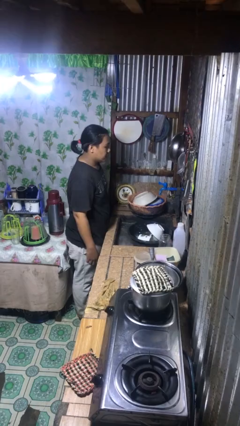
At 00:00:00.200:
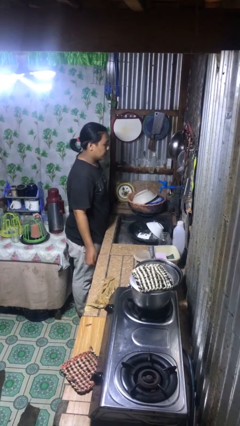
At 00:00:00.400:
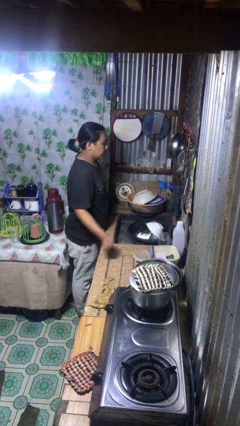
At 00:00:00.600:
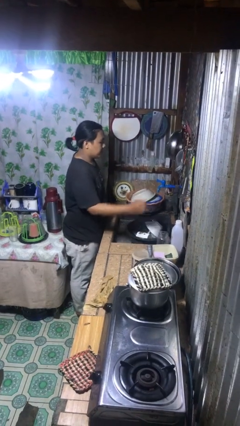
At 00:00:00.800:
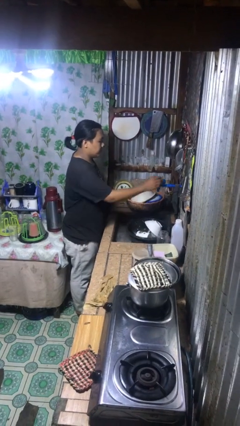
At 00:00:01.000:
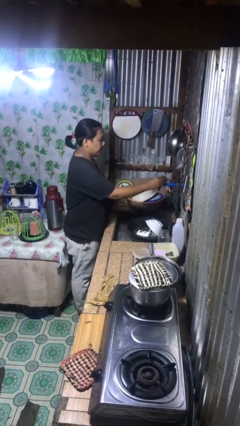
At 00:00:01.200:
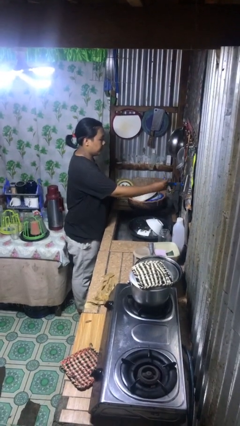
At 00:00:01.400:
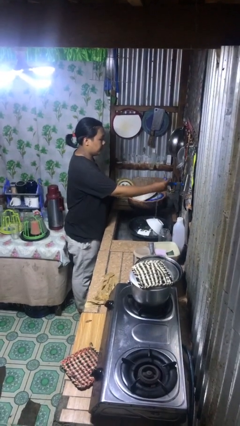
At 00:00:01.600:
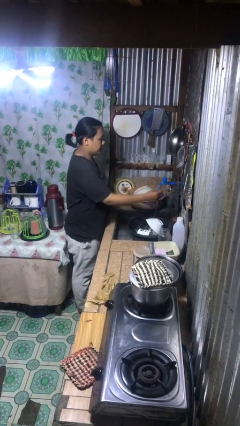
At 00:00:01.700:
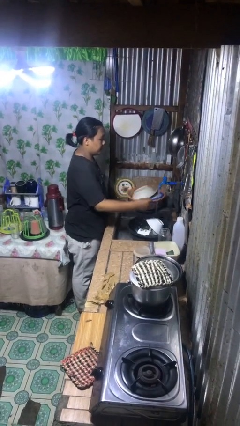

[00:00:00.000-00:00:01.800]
person turns on faucet

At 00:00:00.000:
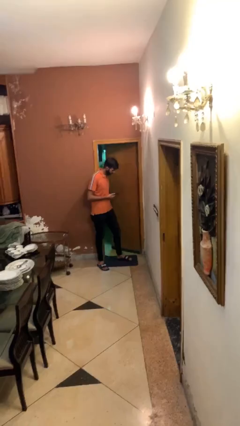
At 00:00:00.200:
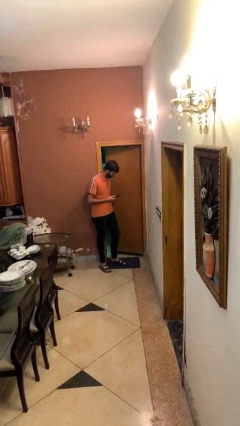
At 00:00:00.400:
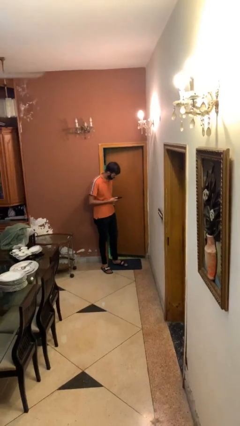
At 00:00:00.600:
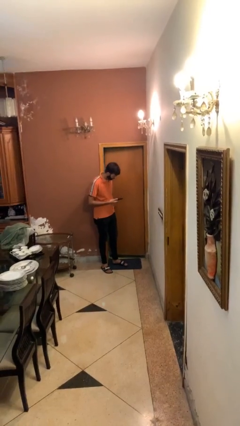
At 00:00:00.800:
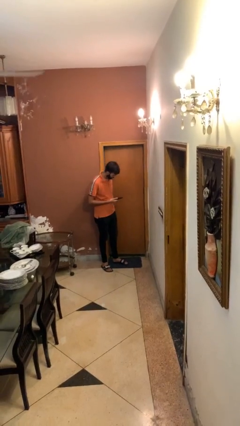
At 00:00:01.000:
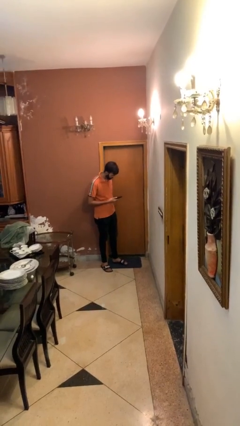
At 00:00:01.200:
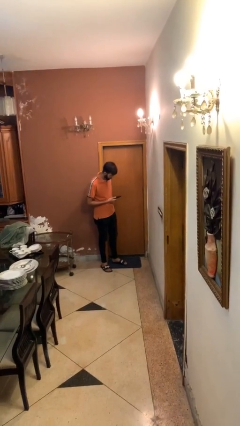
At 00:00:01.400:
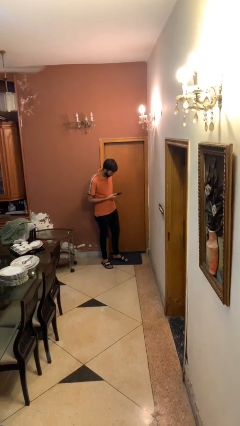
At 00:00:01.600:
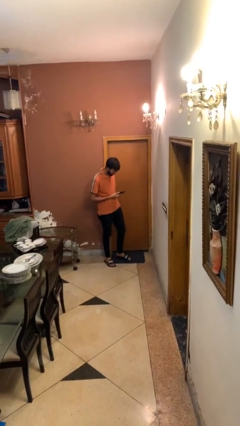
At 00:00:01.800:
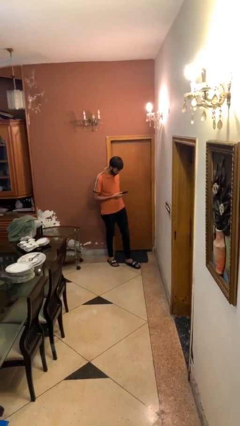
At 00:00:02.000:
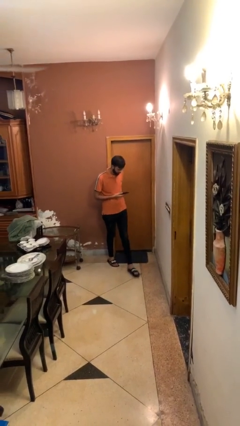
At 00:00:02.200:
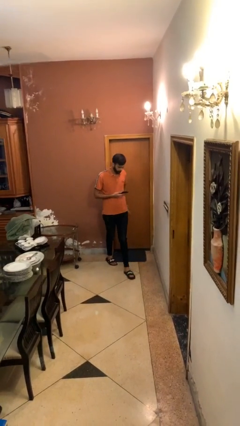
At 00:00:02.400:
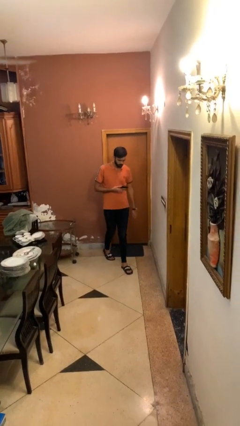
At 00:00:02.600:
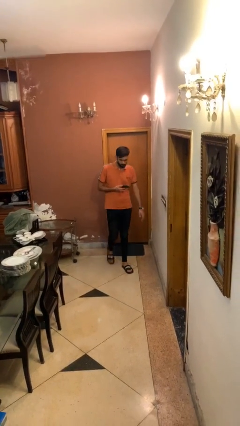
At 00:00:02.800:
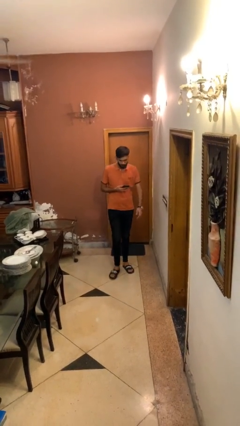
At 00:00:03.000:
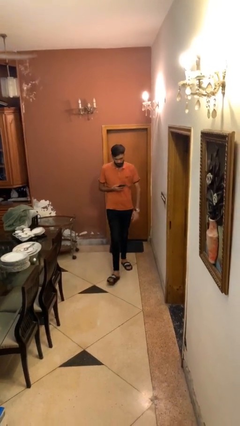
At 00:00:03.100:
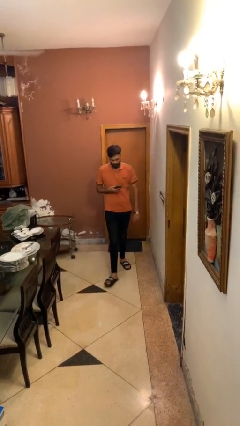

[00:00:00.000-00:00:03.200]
person closes facility door

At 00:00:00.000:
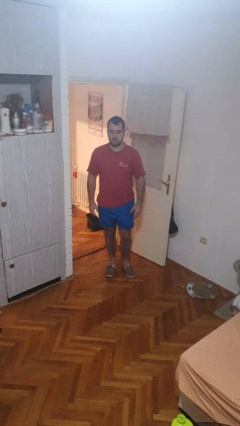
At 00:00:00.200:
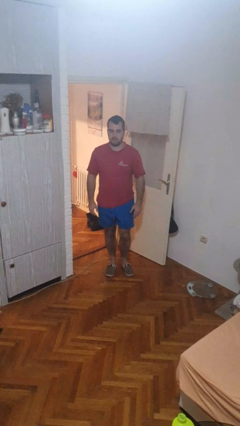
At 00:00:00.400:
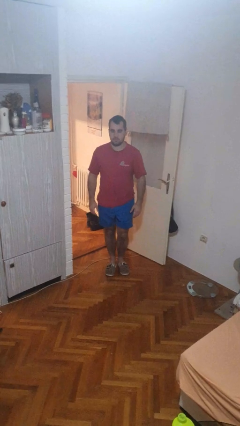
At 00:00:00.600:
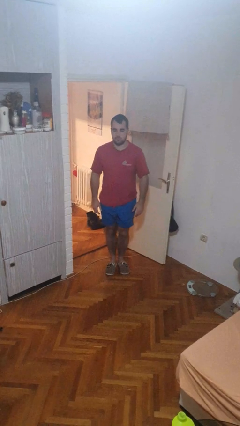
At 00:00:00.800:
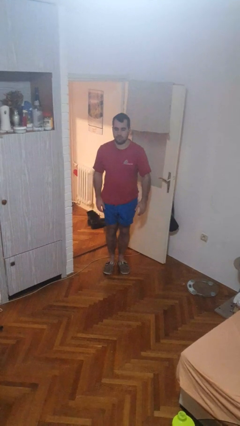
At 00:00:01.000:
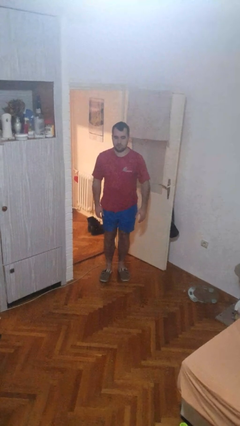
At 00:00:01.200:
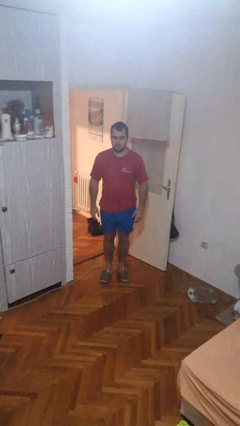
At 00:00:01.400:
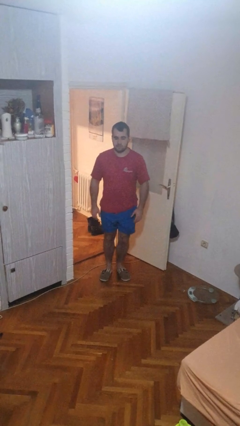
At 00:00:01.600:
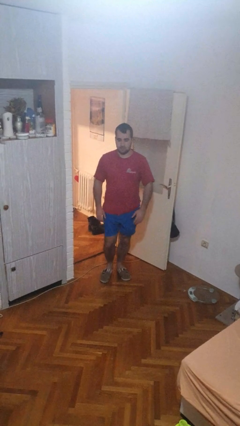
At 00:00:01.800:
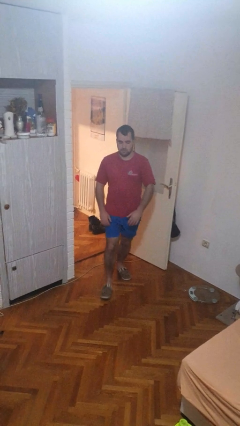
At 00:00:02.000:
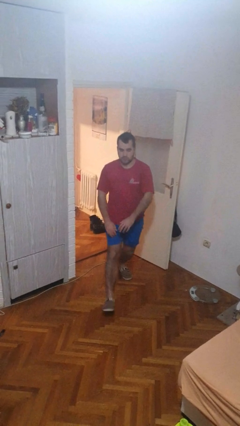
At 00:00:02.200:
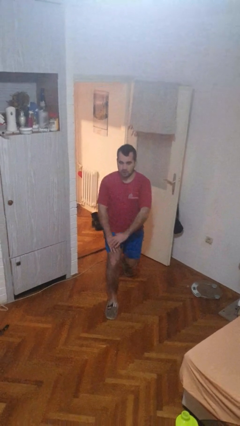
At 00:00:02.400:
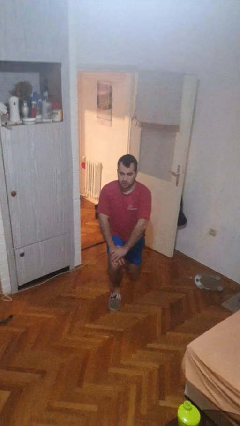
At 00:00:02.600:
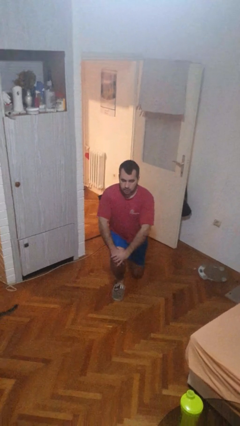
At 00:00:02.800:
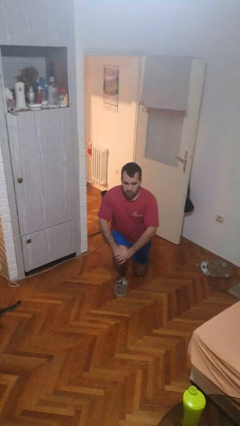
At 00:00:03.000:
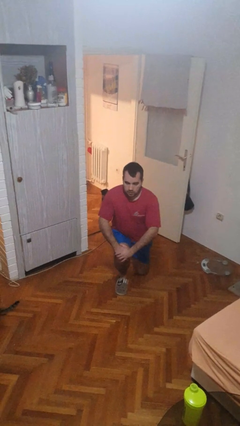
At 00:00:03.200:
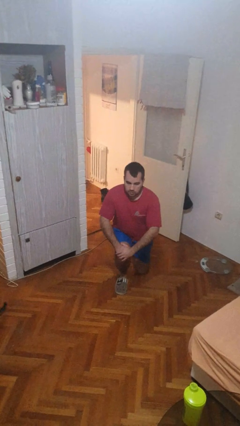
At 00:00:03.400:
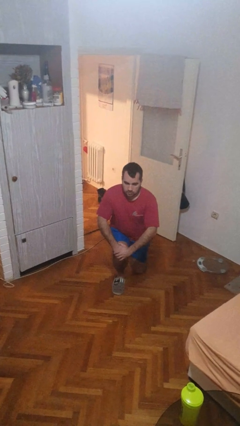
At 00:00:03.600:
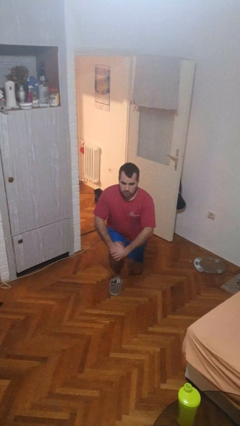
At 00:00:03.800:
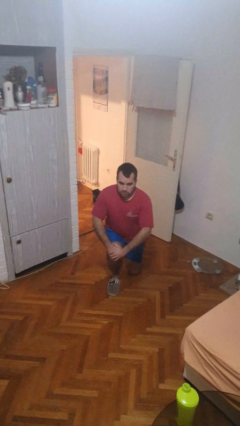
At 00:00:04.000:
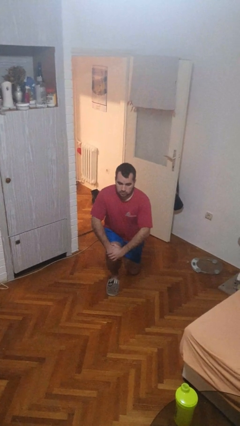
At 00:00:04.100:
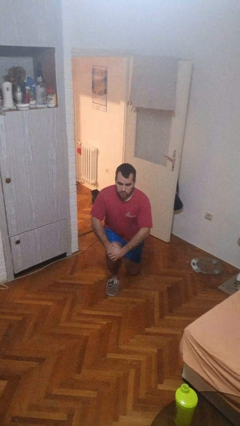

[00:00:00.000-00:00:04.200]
person kneels

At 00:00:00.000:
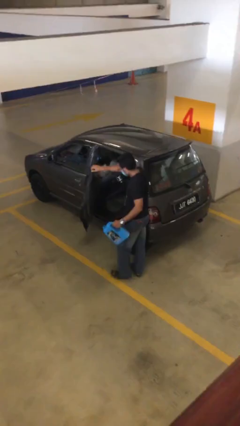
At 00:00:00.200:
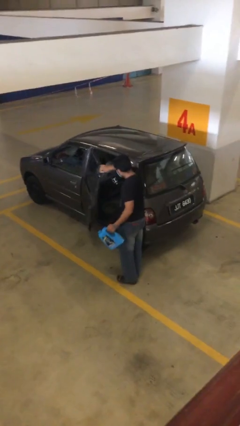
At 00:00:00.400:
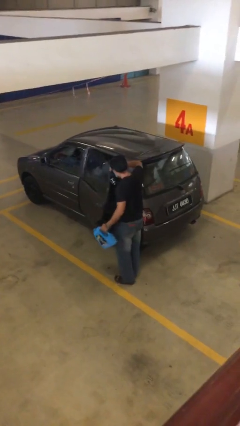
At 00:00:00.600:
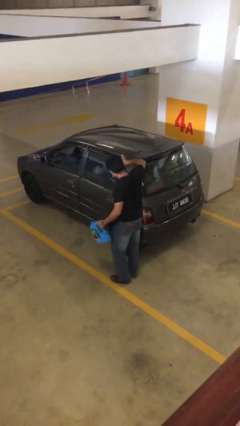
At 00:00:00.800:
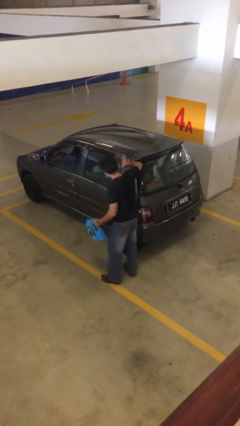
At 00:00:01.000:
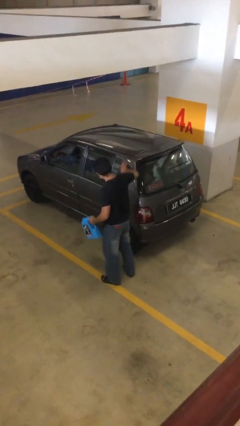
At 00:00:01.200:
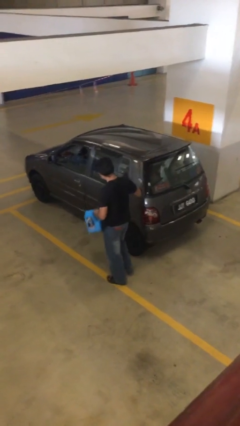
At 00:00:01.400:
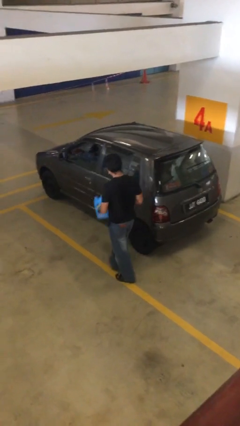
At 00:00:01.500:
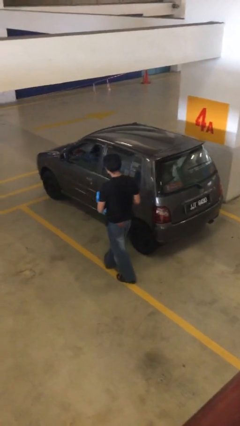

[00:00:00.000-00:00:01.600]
person closes car door

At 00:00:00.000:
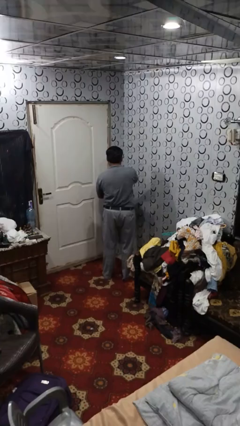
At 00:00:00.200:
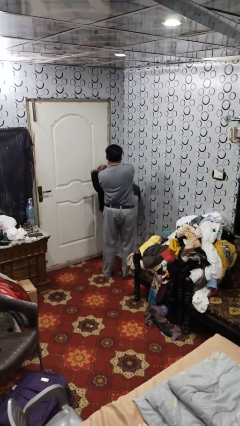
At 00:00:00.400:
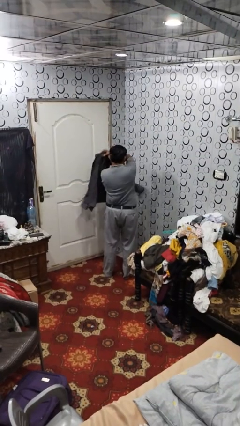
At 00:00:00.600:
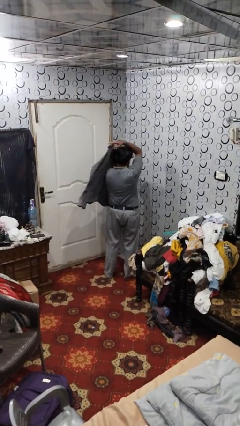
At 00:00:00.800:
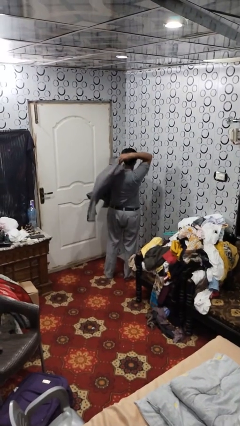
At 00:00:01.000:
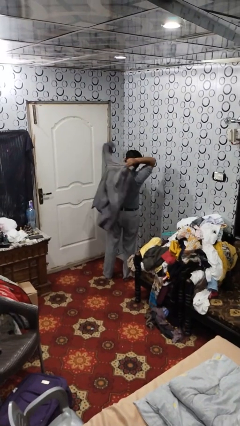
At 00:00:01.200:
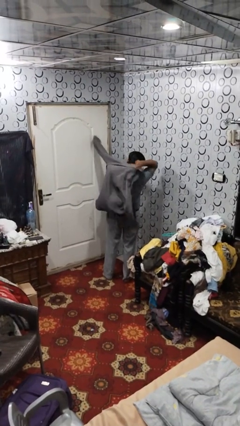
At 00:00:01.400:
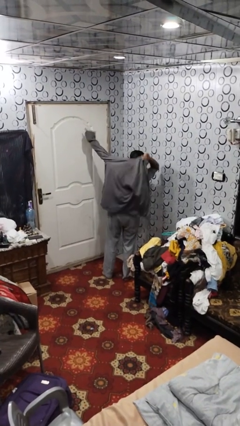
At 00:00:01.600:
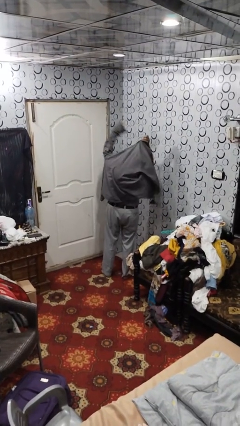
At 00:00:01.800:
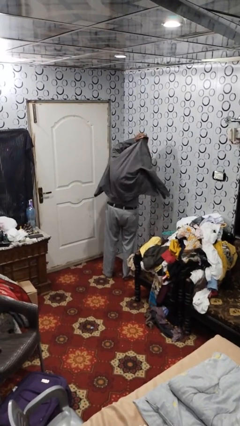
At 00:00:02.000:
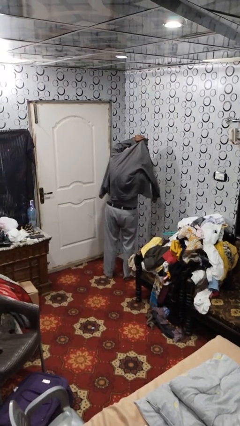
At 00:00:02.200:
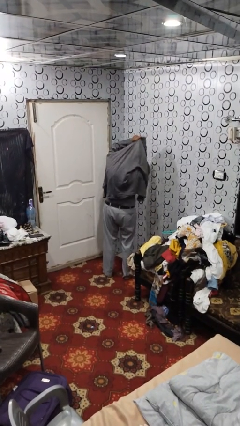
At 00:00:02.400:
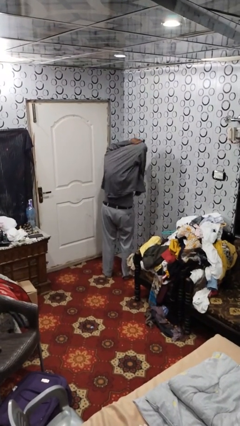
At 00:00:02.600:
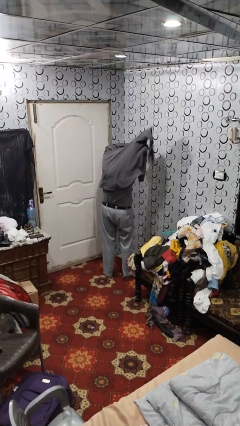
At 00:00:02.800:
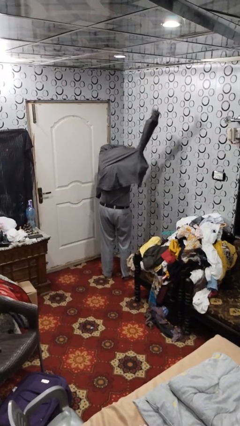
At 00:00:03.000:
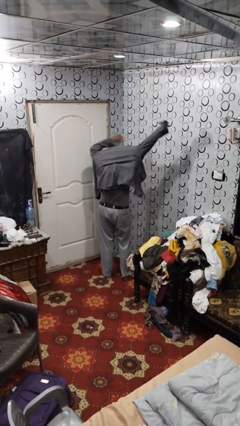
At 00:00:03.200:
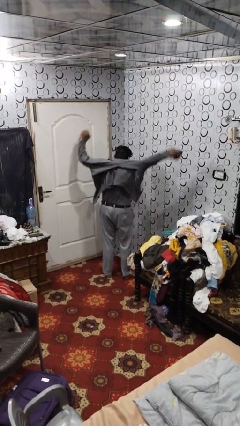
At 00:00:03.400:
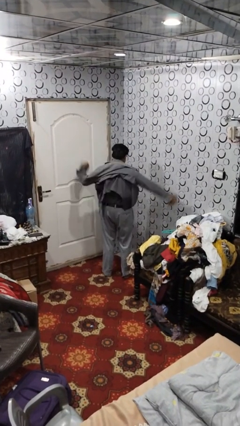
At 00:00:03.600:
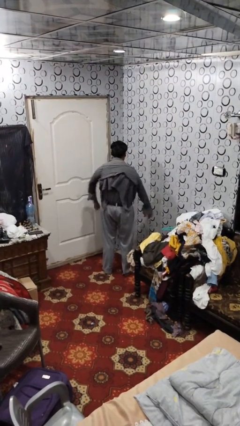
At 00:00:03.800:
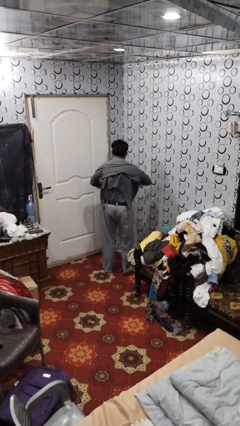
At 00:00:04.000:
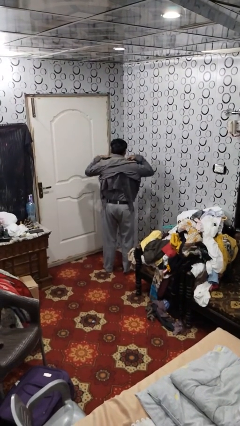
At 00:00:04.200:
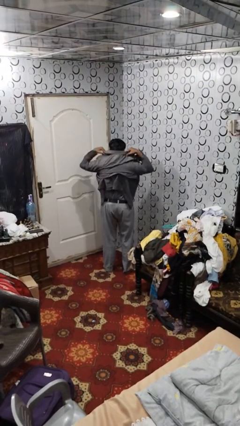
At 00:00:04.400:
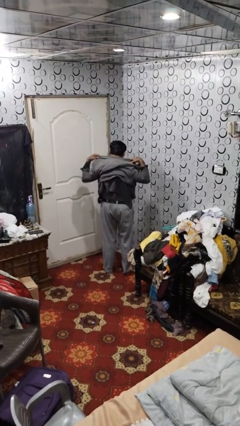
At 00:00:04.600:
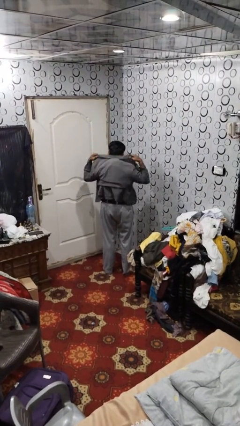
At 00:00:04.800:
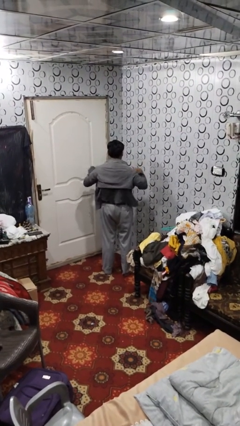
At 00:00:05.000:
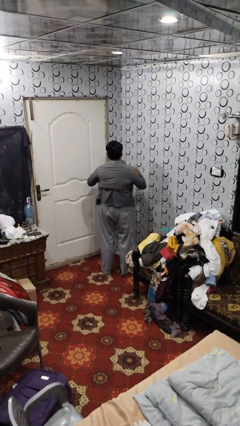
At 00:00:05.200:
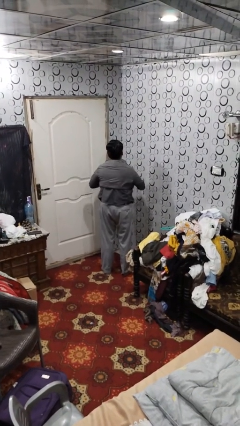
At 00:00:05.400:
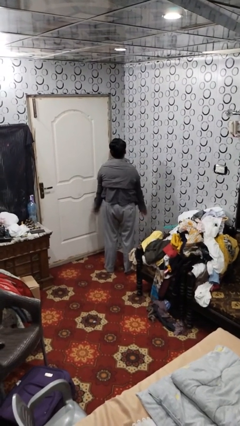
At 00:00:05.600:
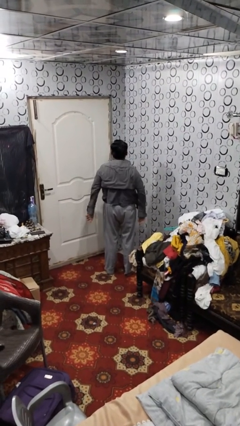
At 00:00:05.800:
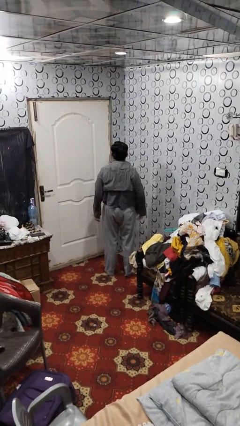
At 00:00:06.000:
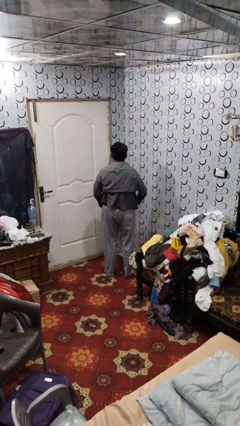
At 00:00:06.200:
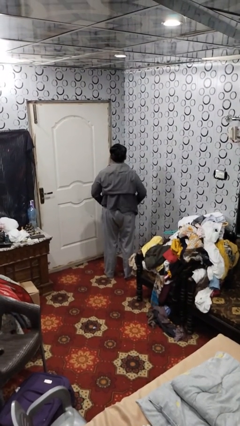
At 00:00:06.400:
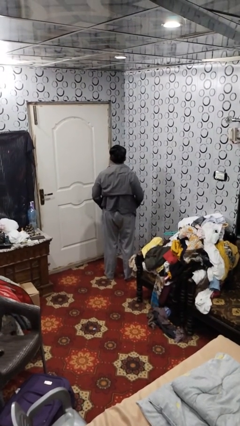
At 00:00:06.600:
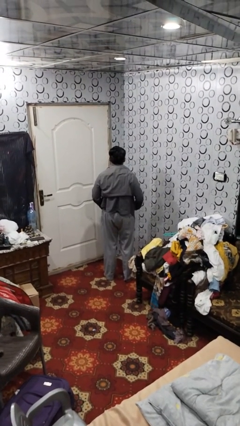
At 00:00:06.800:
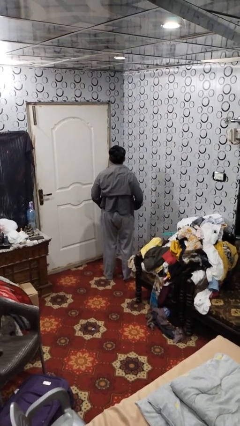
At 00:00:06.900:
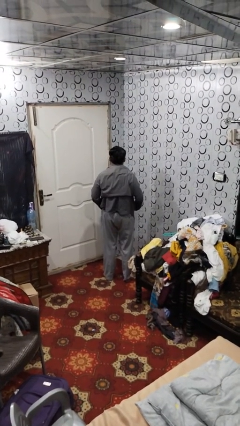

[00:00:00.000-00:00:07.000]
person puts on shirt
